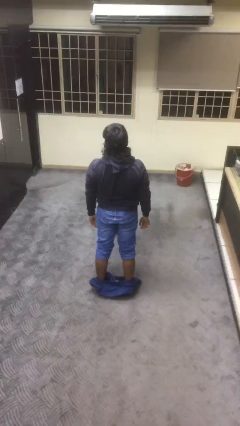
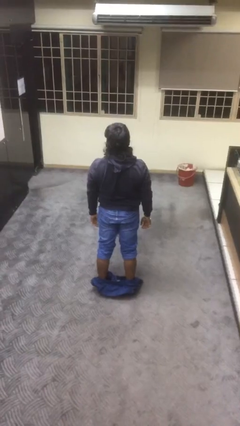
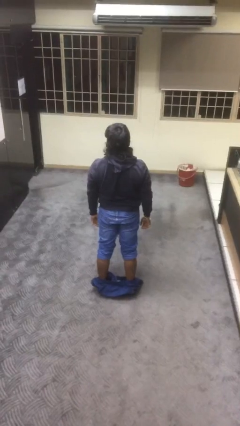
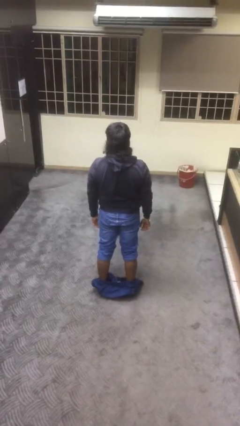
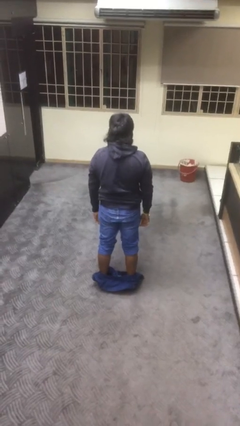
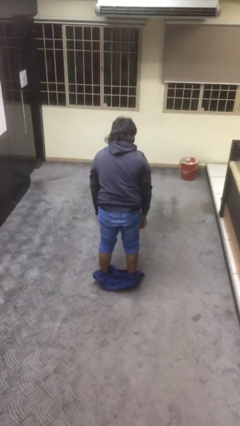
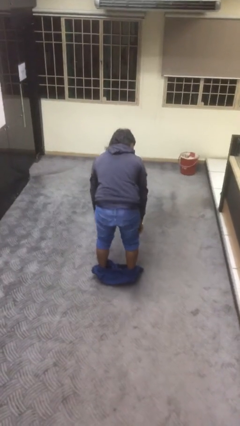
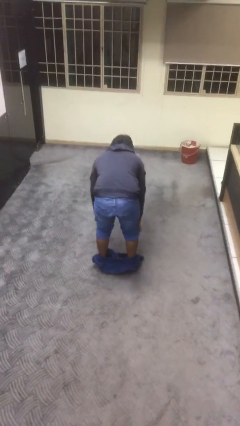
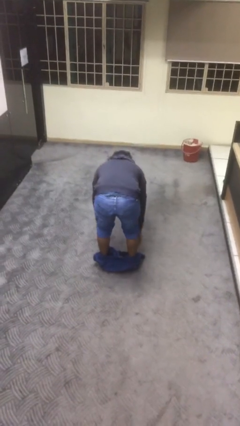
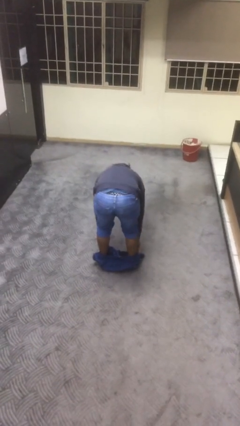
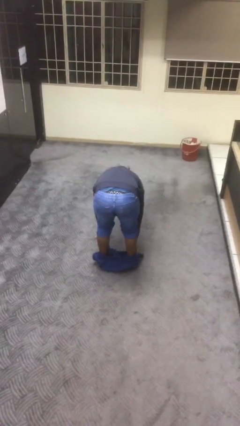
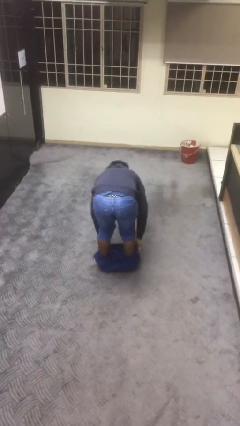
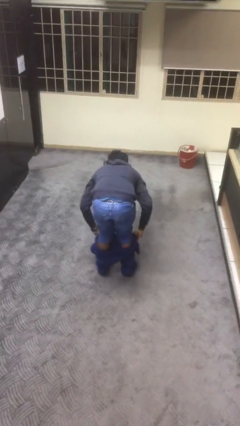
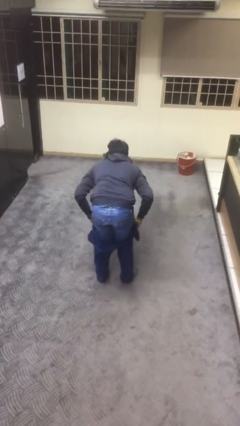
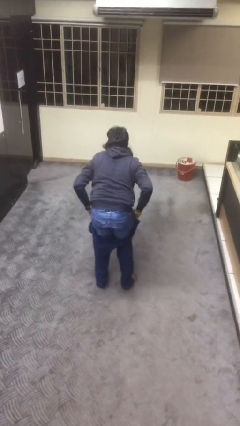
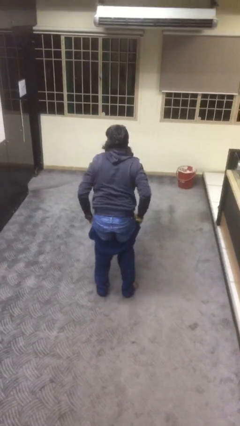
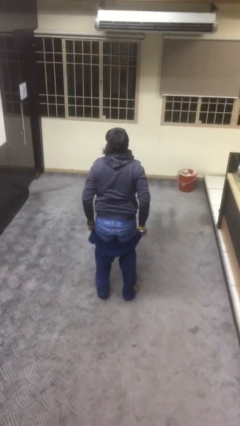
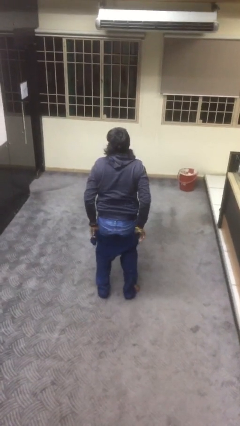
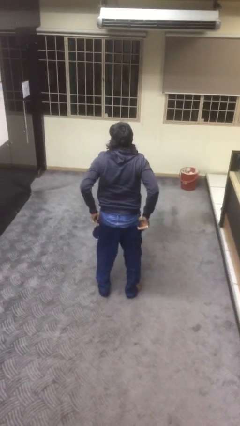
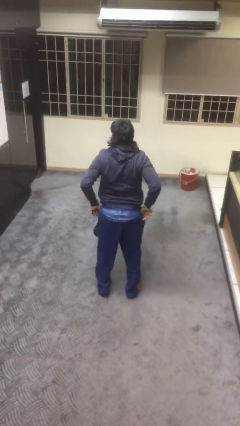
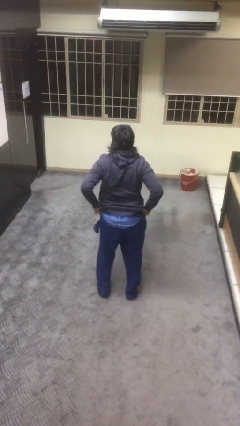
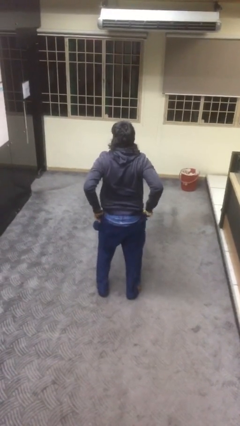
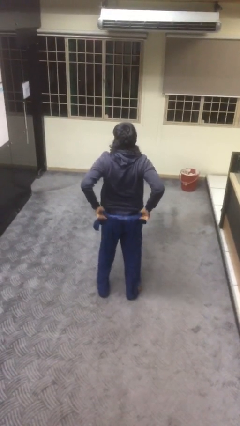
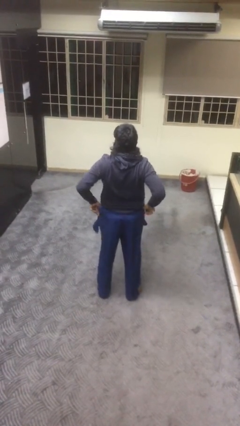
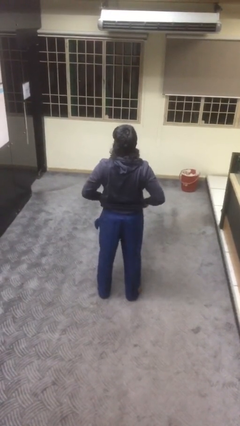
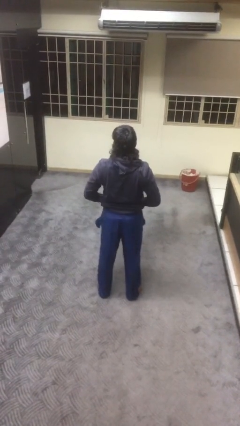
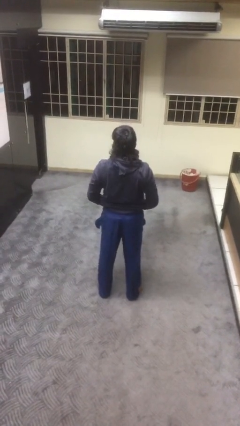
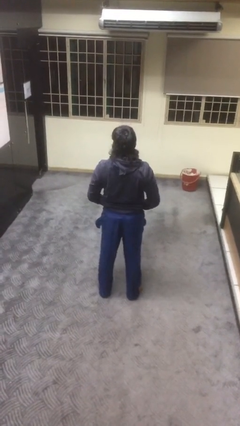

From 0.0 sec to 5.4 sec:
person puts on pants

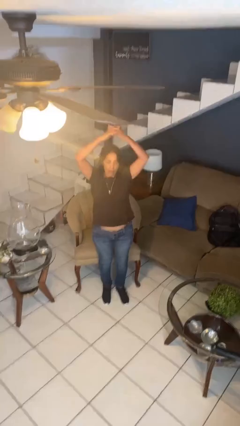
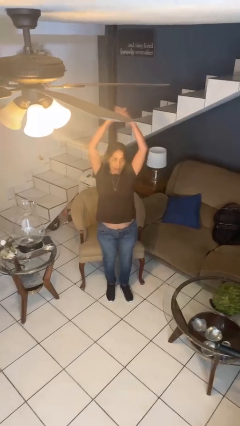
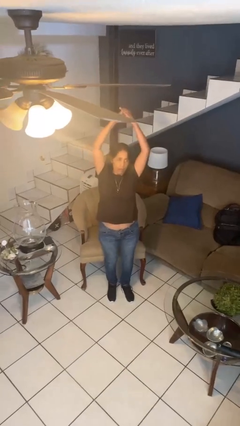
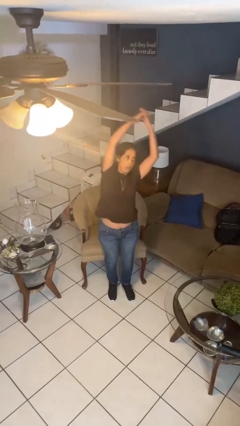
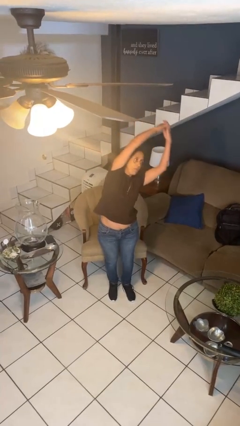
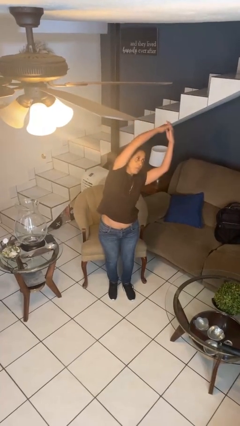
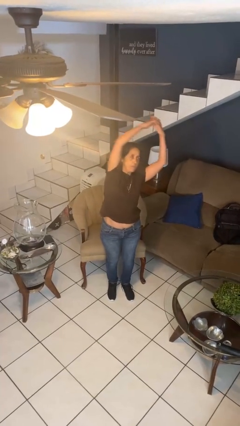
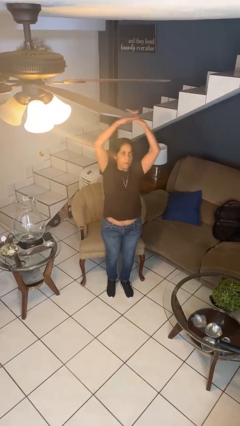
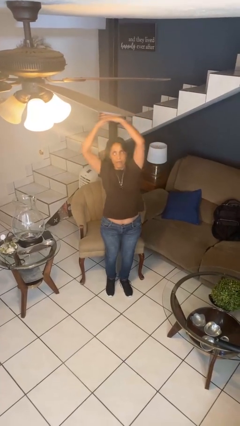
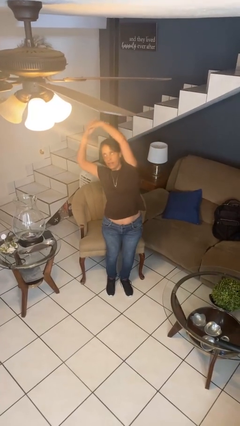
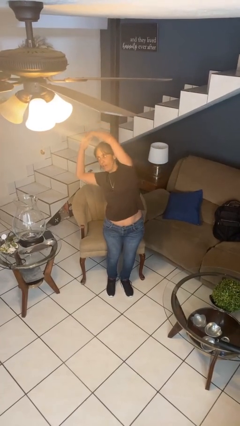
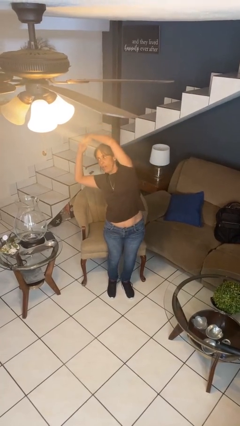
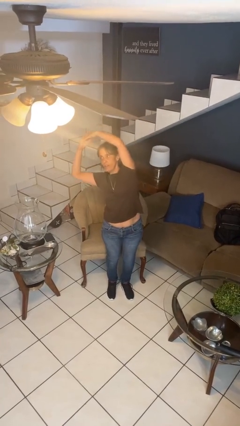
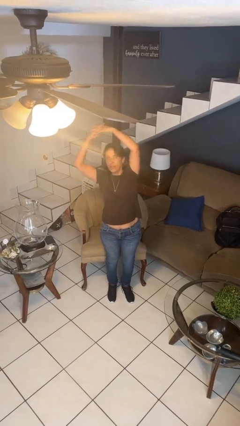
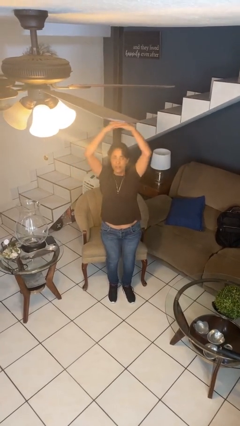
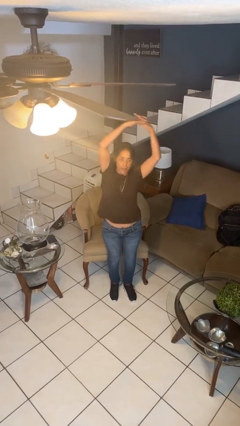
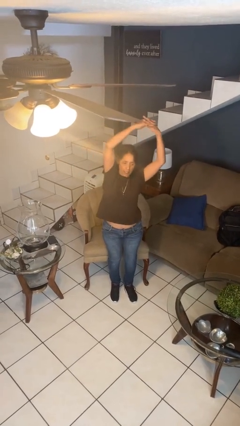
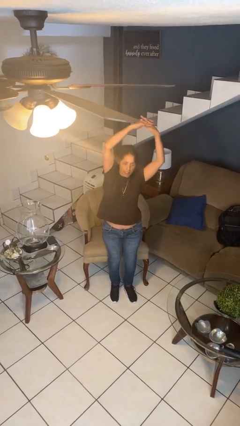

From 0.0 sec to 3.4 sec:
person stretches arms over head

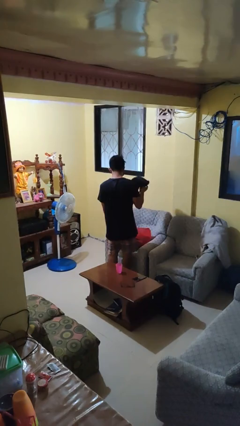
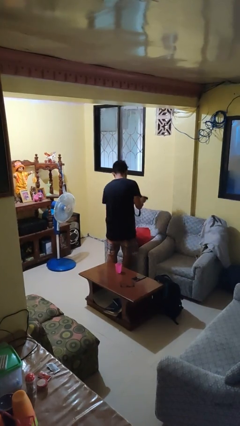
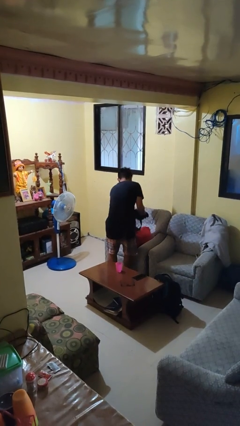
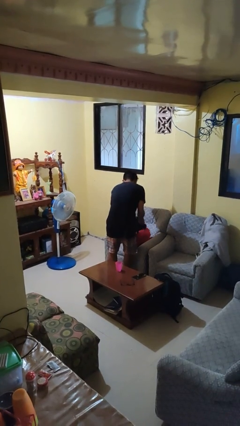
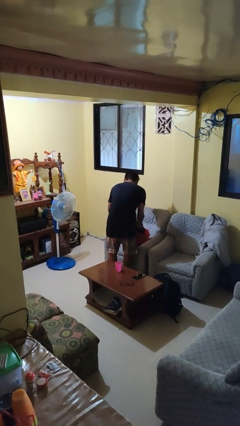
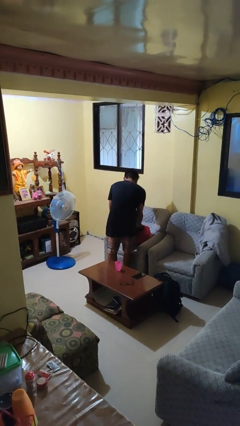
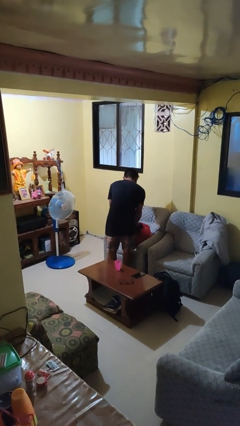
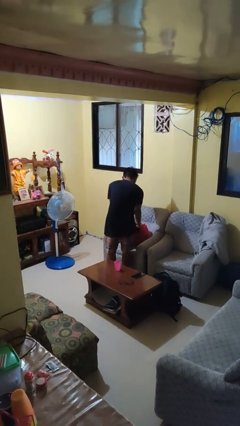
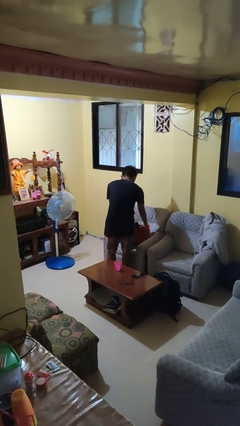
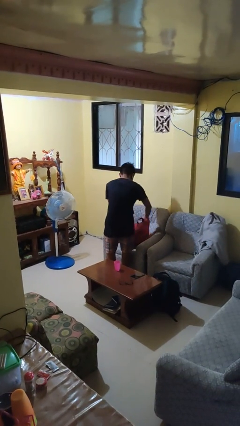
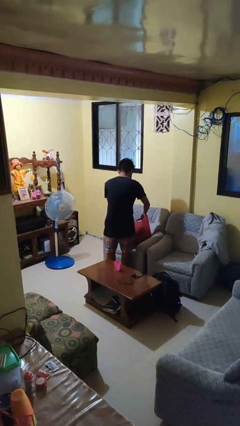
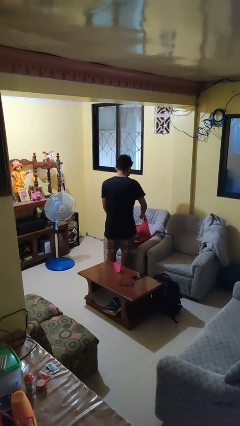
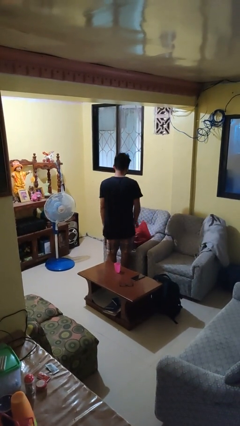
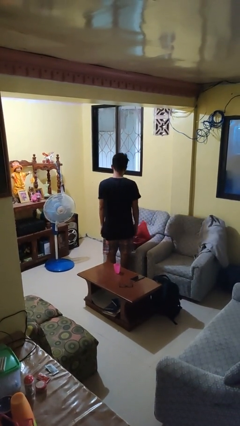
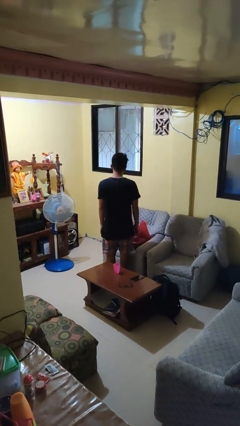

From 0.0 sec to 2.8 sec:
person puts object into bag

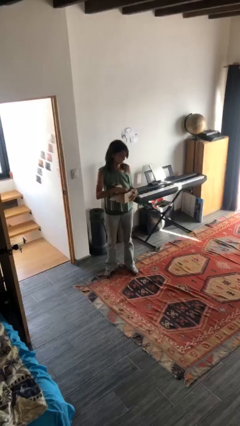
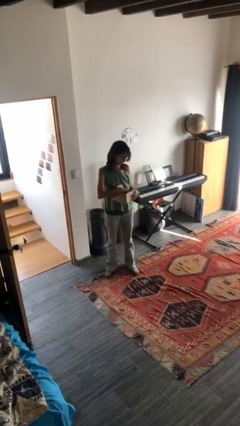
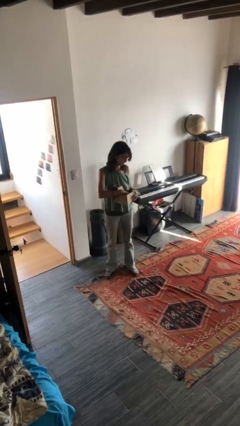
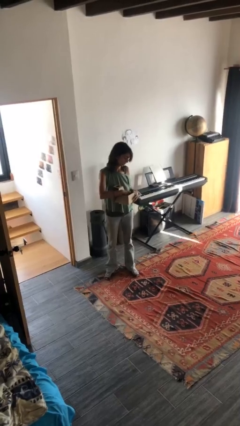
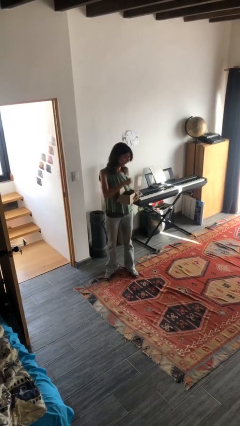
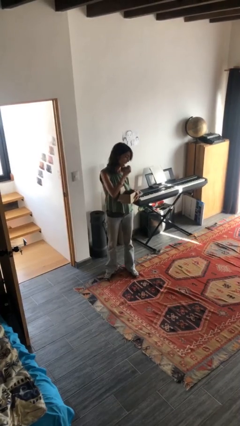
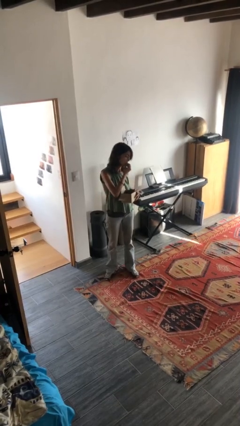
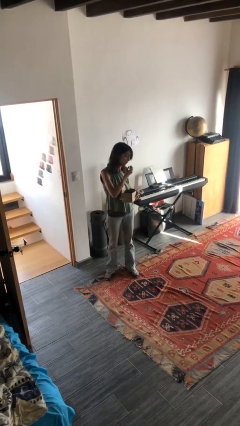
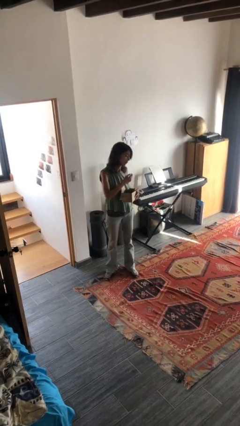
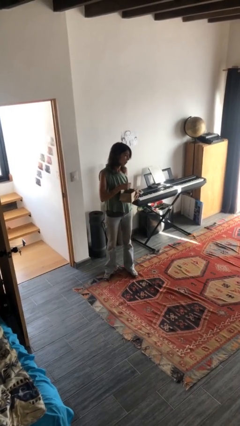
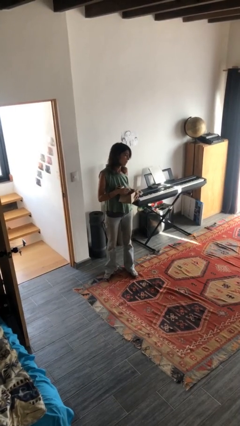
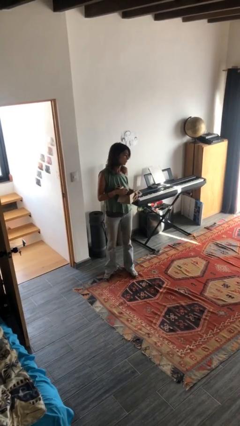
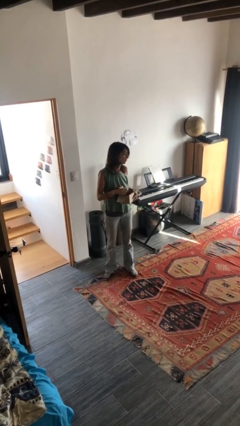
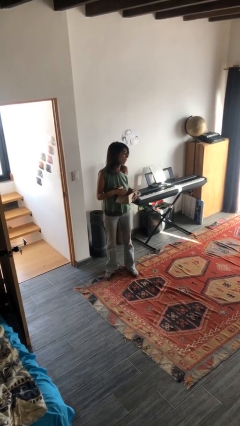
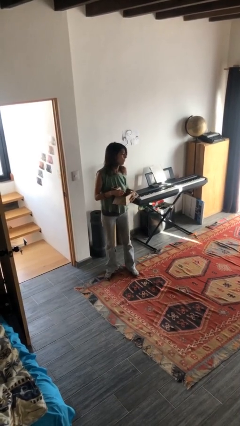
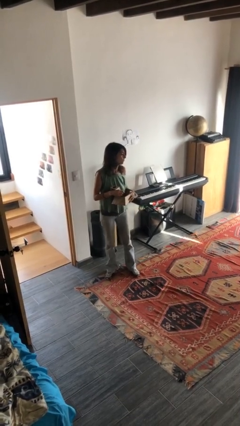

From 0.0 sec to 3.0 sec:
person eats snack from bag

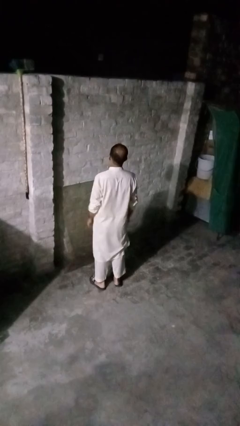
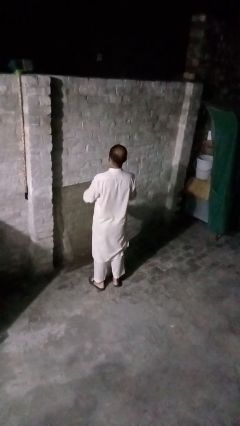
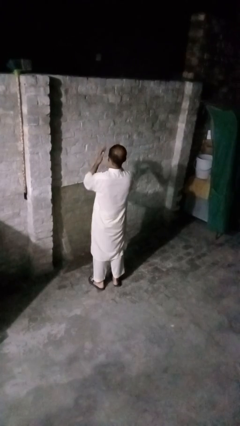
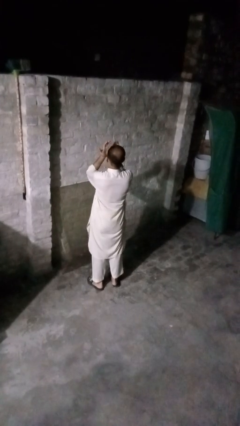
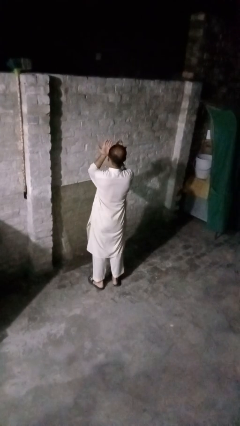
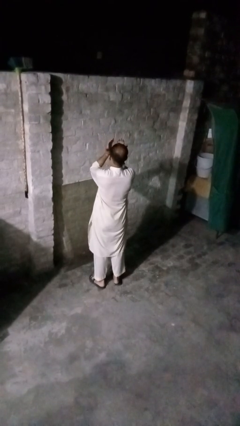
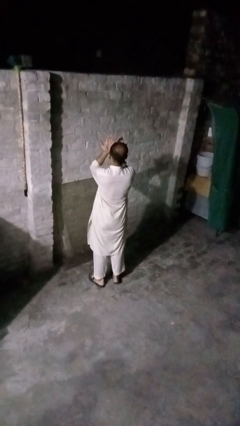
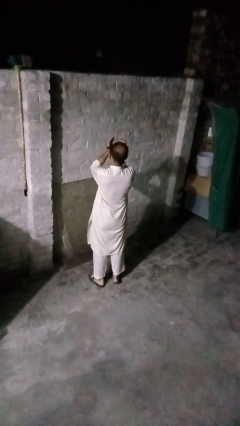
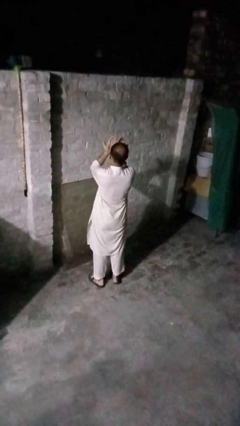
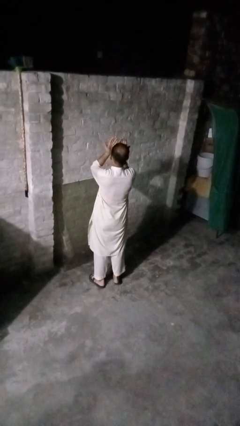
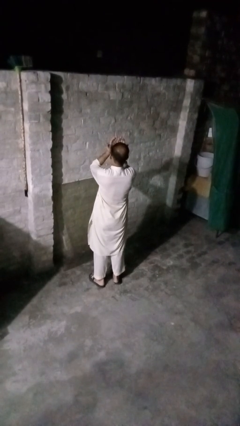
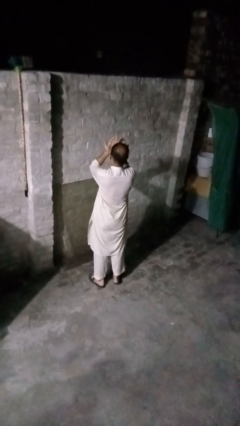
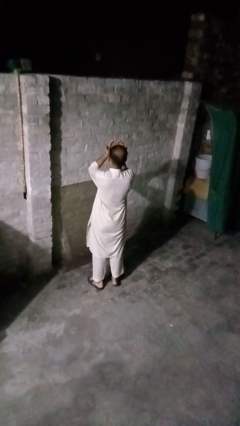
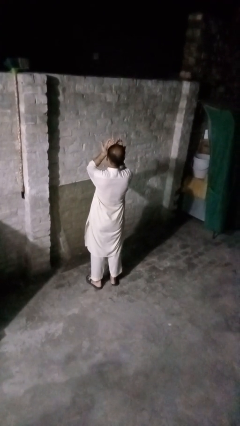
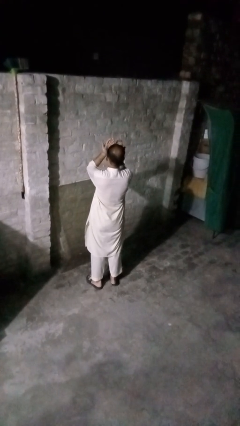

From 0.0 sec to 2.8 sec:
person rubs eyes
